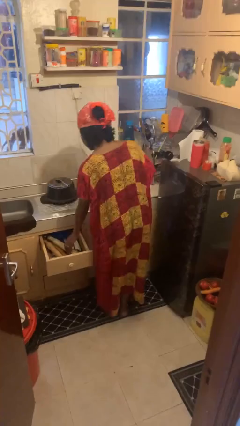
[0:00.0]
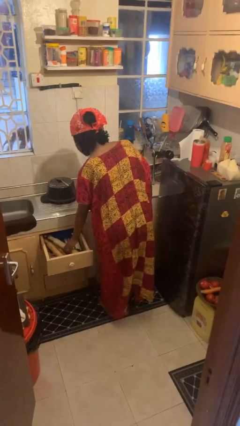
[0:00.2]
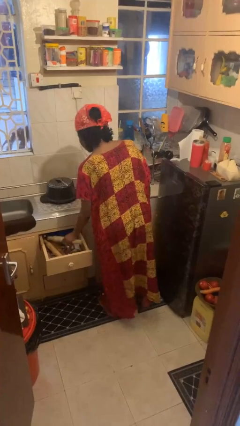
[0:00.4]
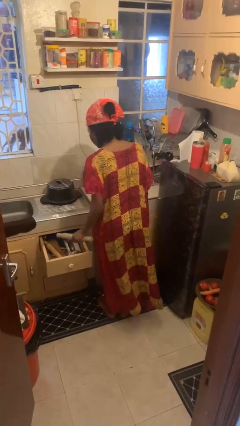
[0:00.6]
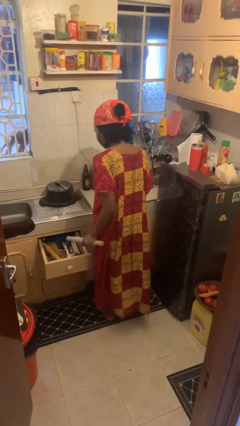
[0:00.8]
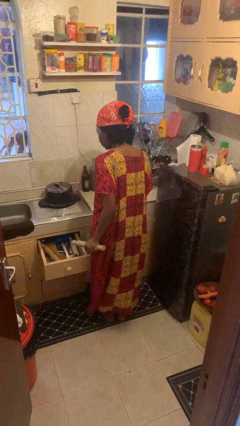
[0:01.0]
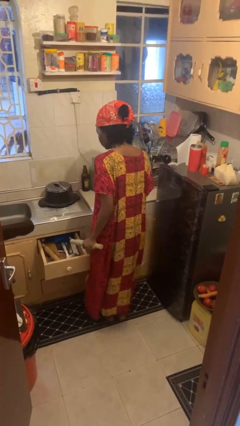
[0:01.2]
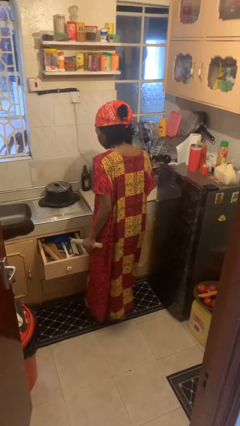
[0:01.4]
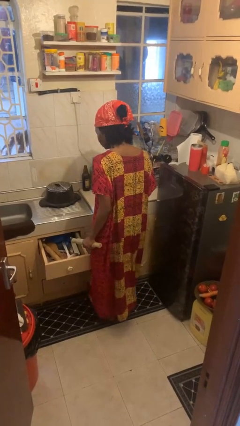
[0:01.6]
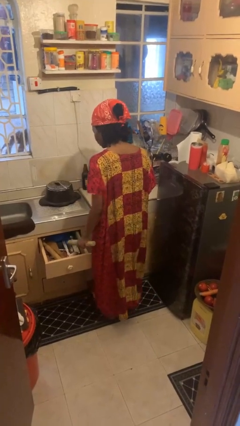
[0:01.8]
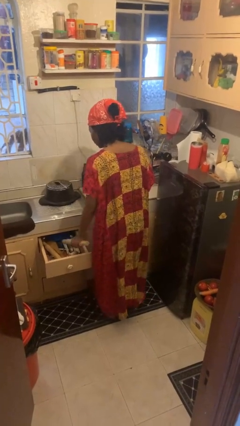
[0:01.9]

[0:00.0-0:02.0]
person takes object from kitchen drawer

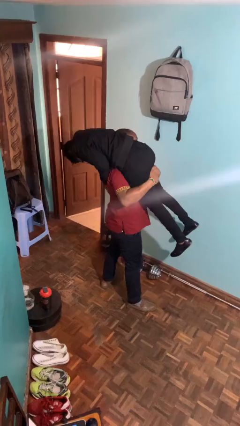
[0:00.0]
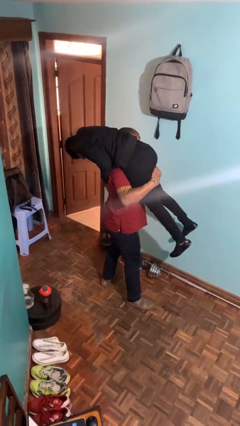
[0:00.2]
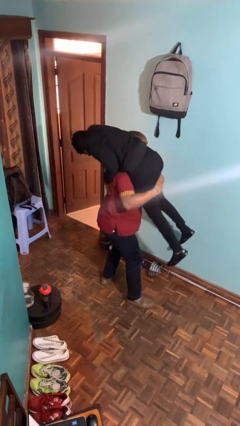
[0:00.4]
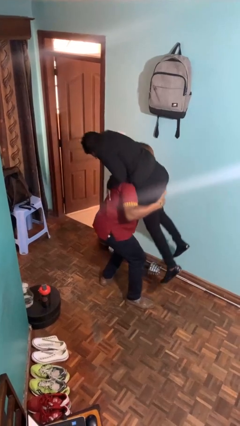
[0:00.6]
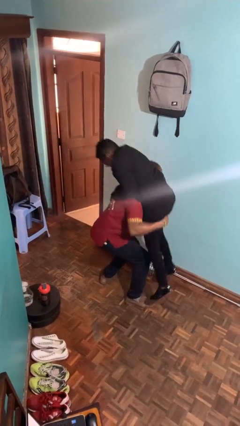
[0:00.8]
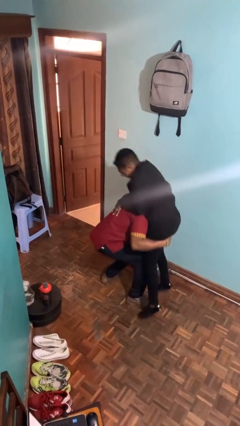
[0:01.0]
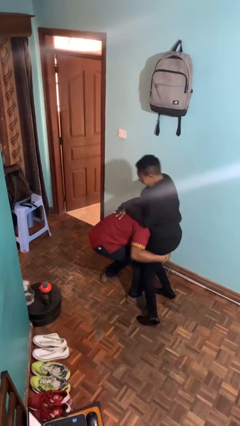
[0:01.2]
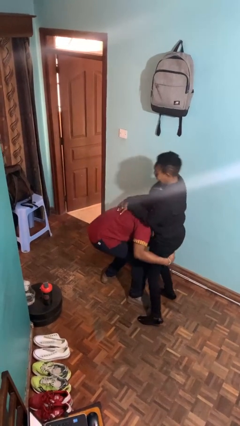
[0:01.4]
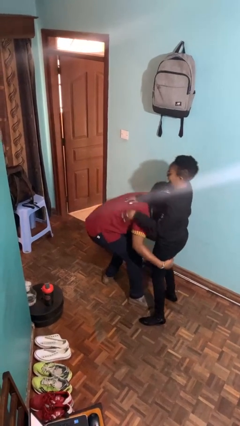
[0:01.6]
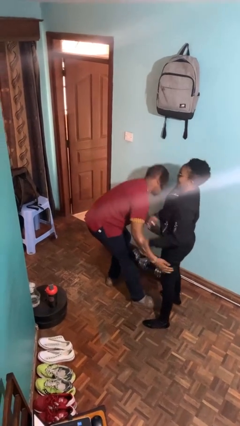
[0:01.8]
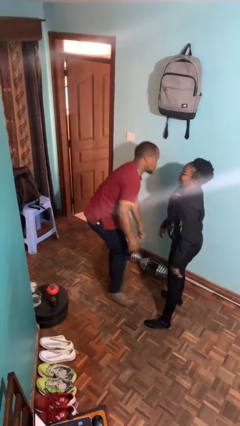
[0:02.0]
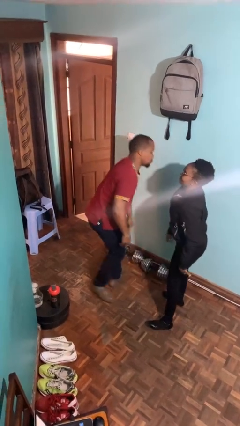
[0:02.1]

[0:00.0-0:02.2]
person puts down person

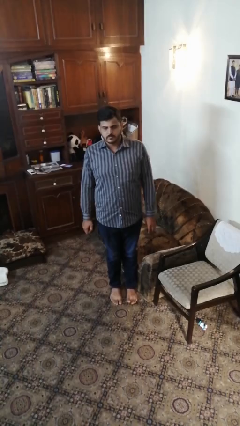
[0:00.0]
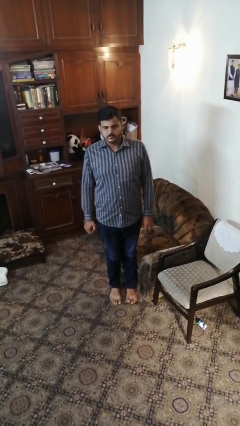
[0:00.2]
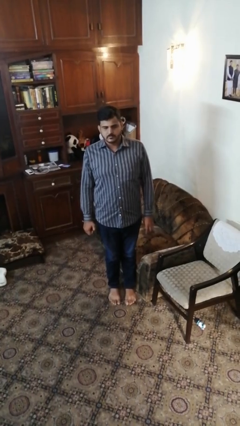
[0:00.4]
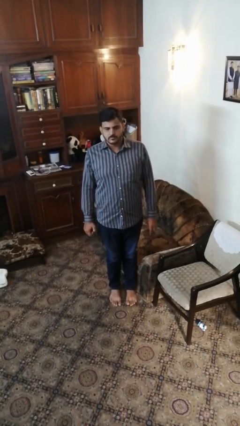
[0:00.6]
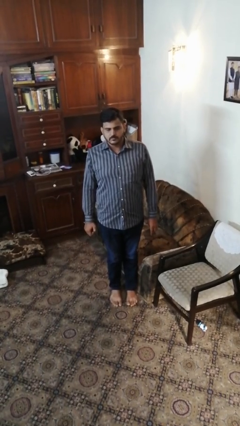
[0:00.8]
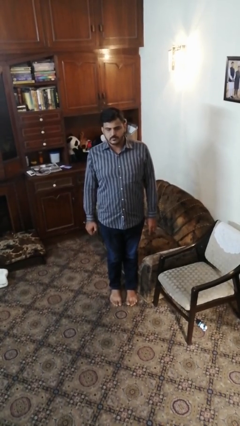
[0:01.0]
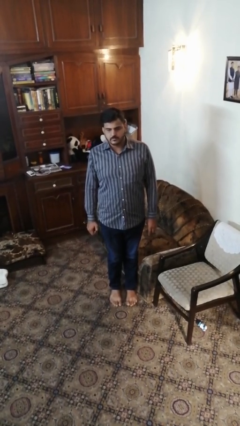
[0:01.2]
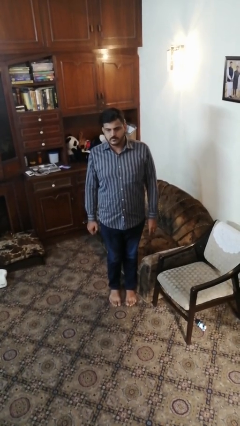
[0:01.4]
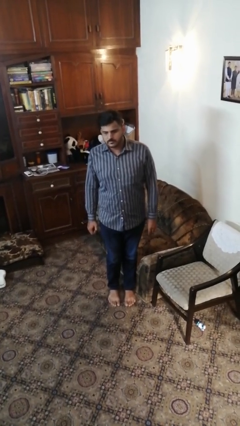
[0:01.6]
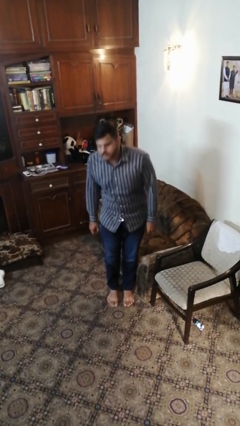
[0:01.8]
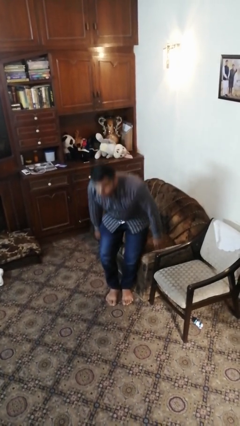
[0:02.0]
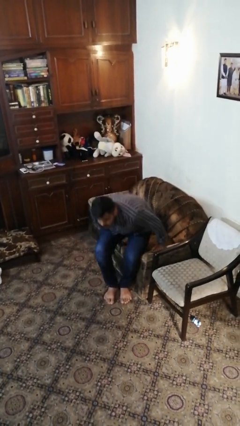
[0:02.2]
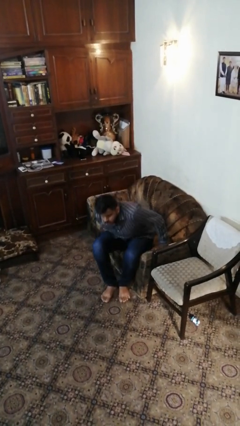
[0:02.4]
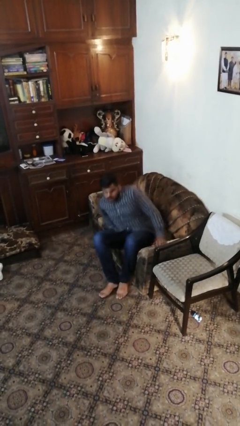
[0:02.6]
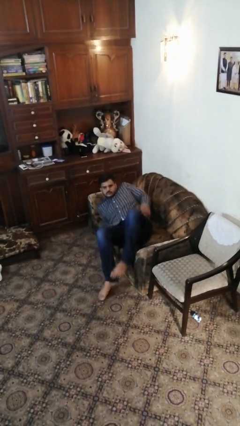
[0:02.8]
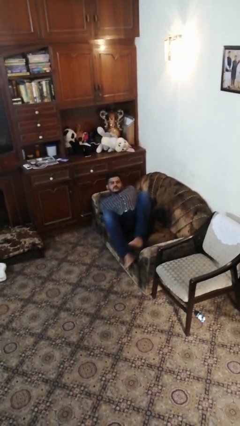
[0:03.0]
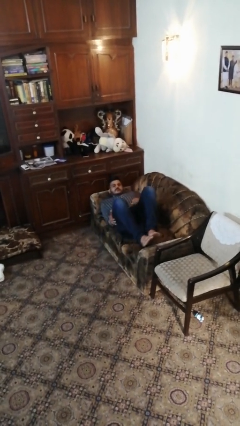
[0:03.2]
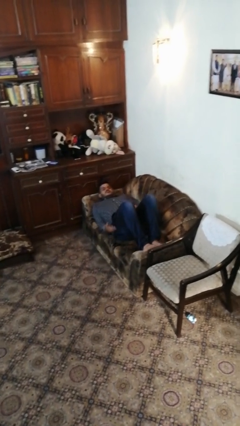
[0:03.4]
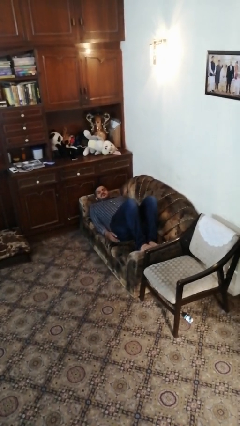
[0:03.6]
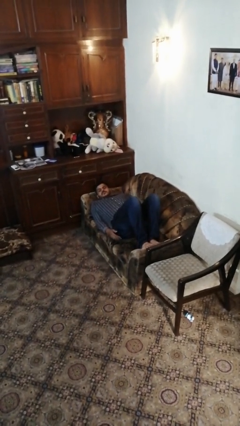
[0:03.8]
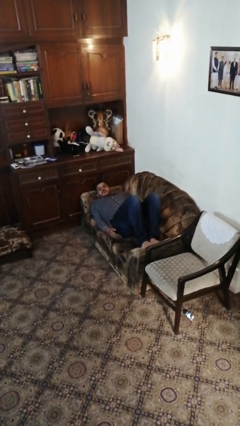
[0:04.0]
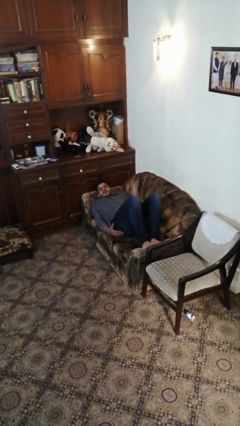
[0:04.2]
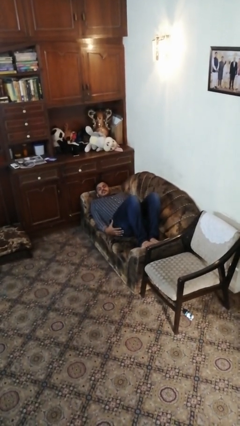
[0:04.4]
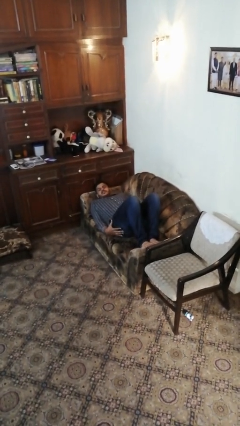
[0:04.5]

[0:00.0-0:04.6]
person lies down on couch

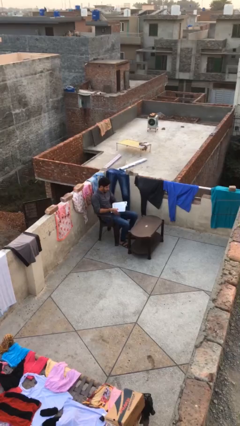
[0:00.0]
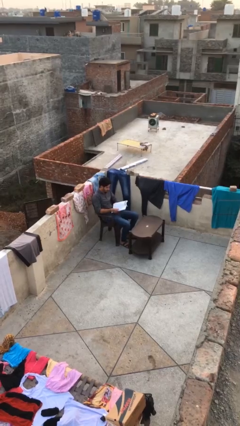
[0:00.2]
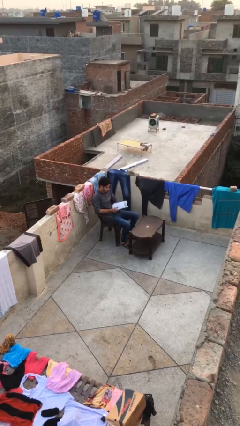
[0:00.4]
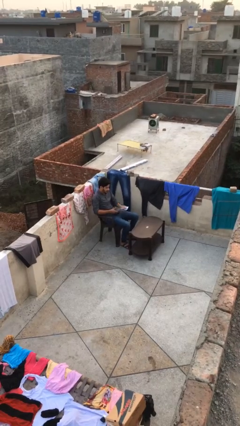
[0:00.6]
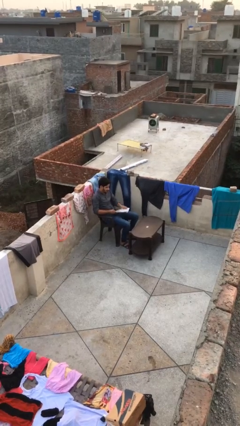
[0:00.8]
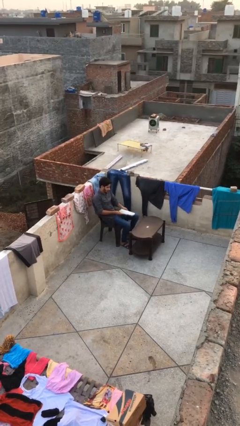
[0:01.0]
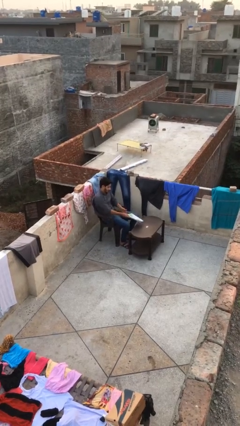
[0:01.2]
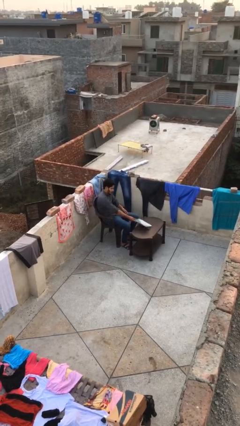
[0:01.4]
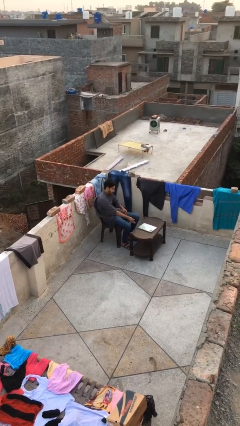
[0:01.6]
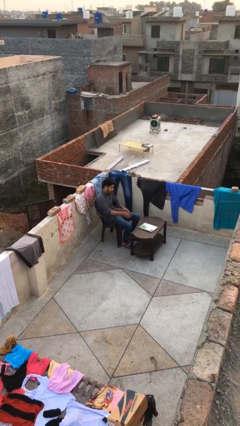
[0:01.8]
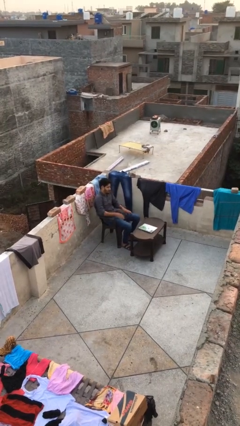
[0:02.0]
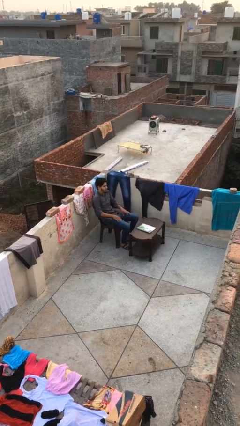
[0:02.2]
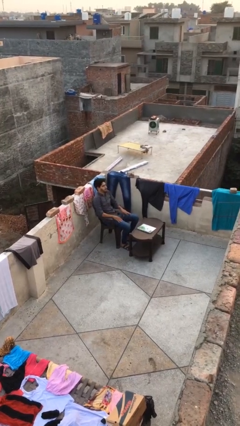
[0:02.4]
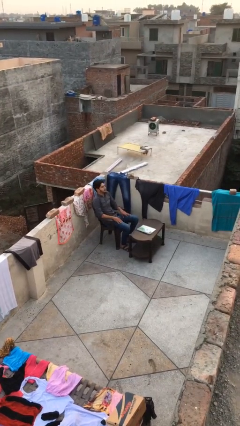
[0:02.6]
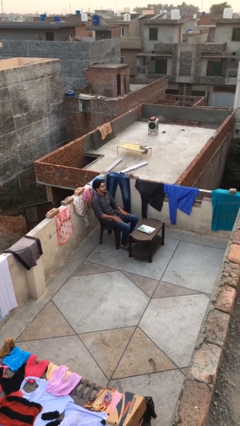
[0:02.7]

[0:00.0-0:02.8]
person puts down object on table

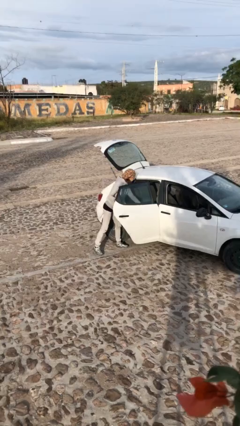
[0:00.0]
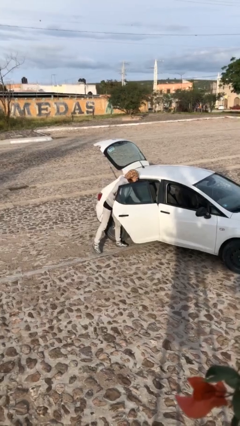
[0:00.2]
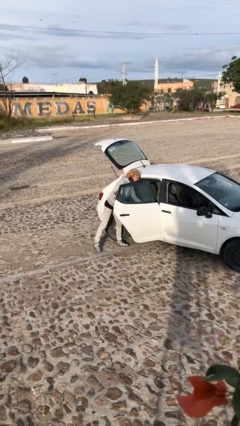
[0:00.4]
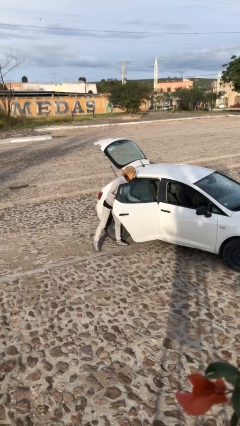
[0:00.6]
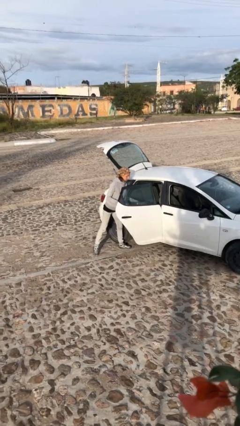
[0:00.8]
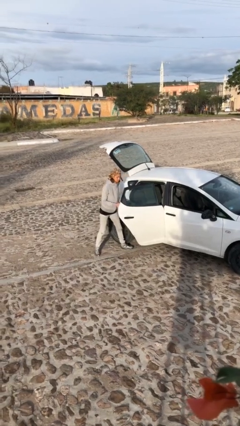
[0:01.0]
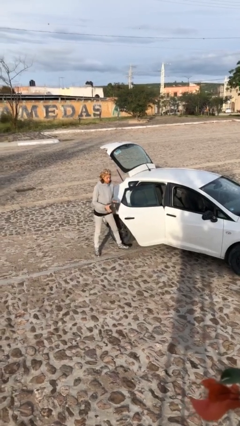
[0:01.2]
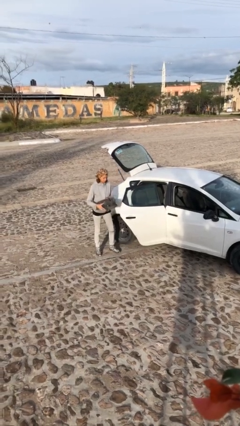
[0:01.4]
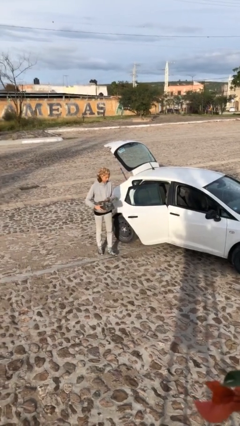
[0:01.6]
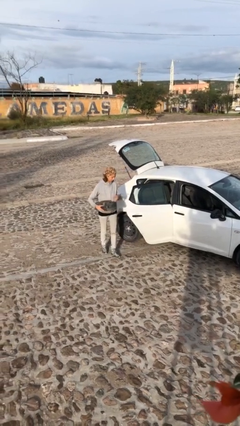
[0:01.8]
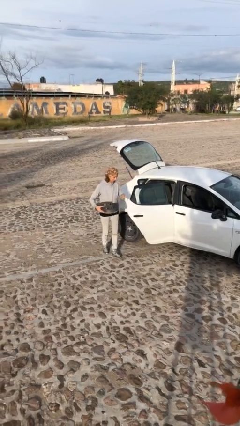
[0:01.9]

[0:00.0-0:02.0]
person unloads car

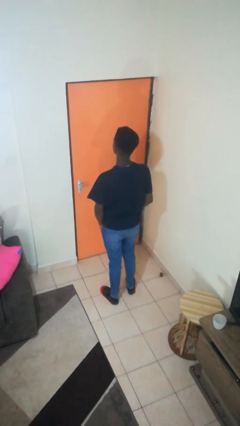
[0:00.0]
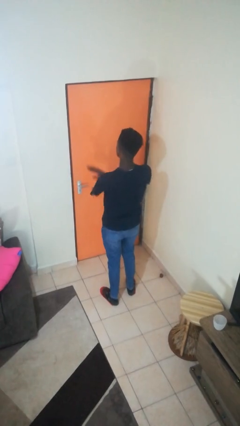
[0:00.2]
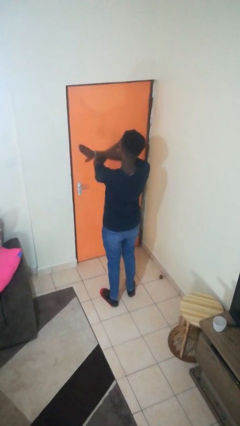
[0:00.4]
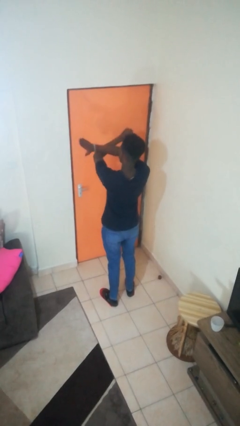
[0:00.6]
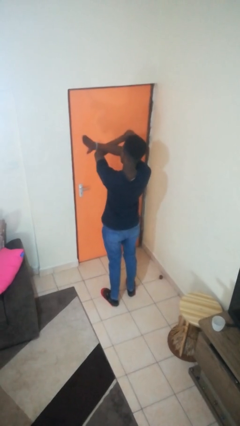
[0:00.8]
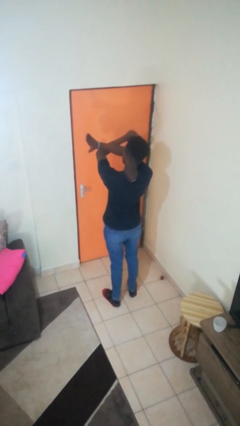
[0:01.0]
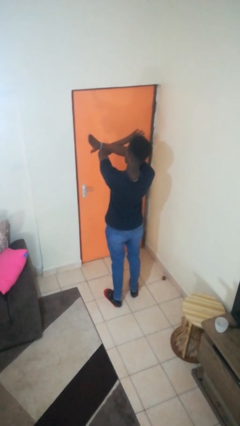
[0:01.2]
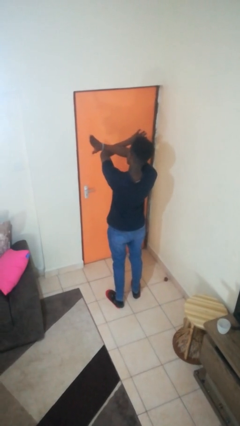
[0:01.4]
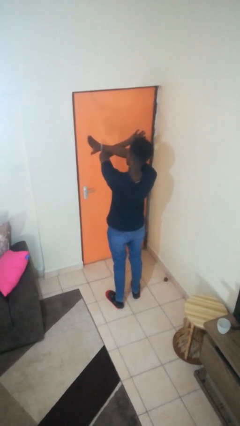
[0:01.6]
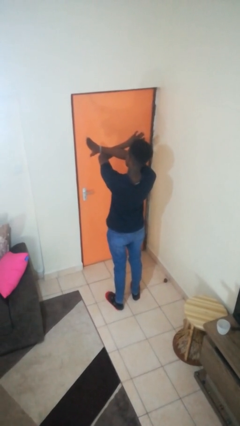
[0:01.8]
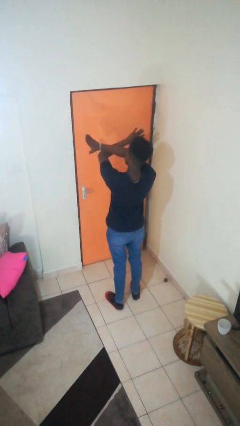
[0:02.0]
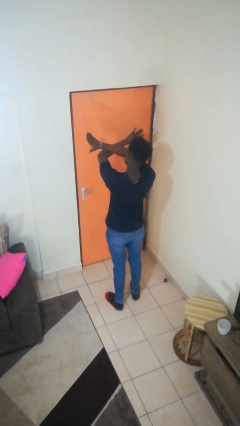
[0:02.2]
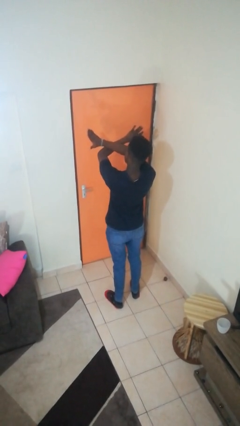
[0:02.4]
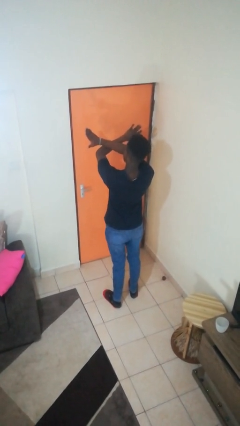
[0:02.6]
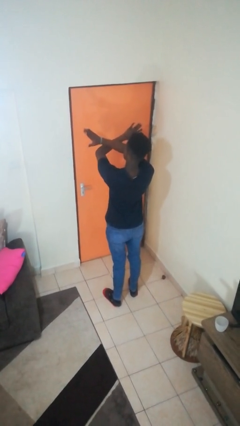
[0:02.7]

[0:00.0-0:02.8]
person gestures arms x

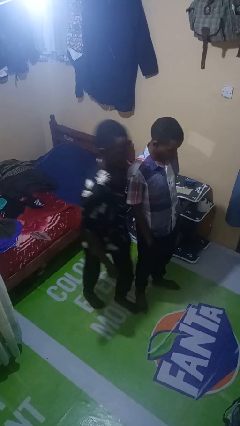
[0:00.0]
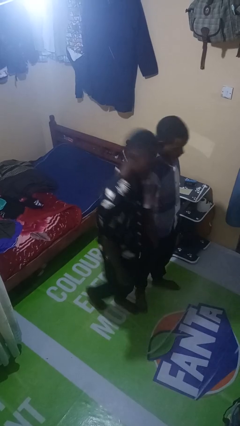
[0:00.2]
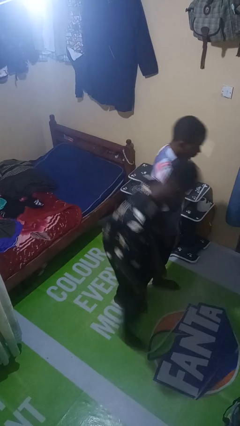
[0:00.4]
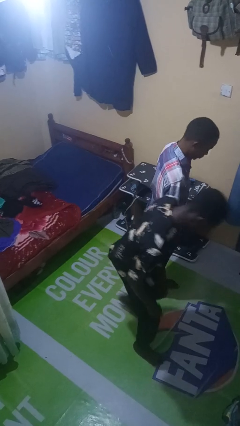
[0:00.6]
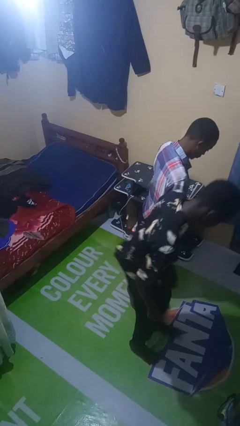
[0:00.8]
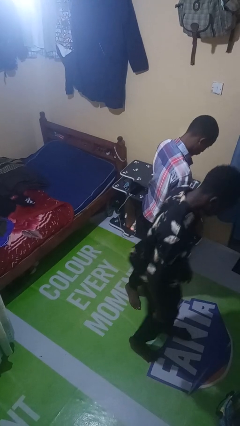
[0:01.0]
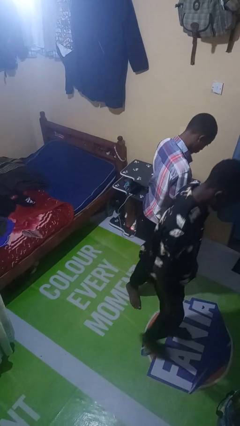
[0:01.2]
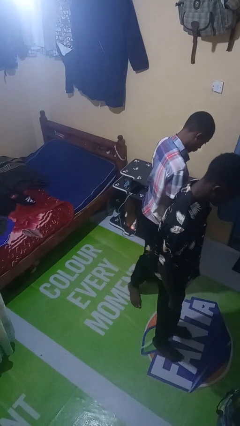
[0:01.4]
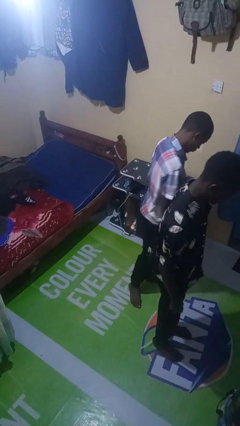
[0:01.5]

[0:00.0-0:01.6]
person bumps into person
